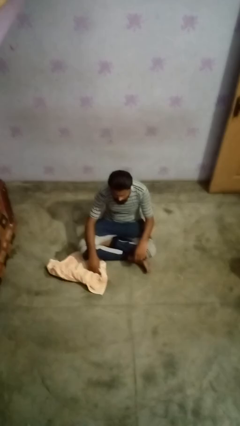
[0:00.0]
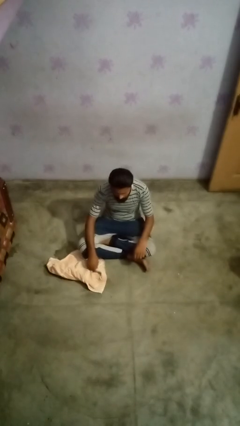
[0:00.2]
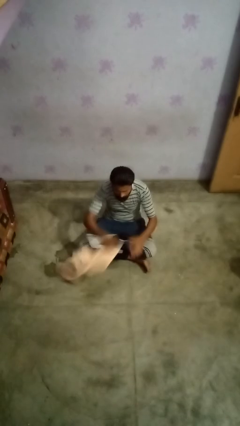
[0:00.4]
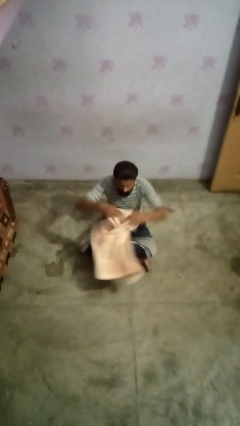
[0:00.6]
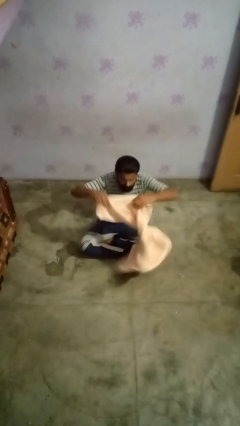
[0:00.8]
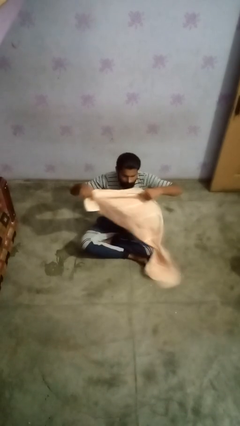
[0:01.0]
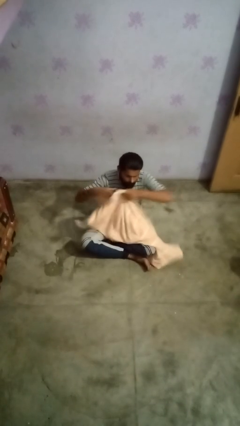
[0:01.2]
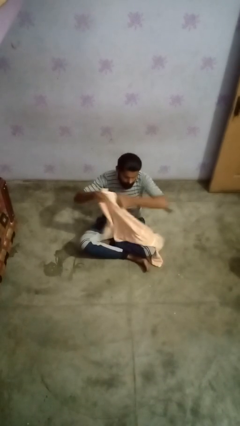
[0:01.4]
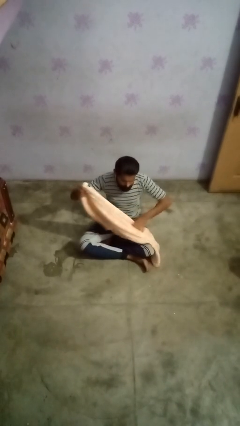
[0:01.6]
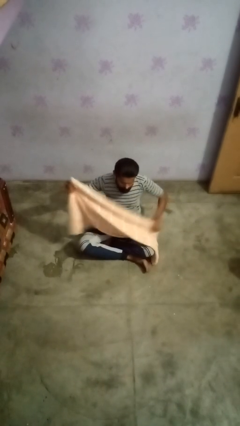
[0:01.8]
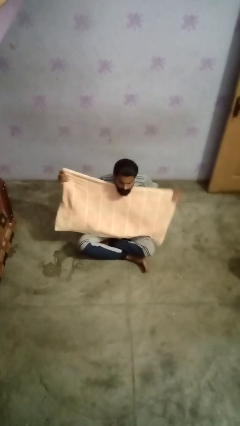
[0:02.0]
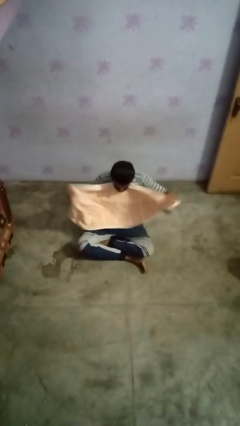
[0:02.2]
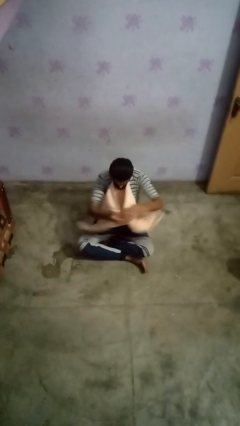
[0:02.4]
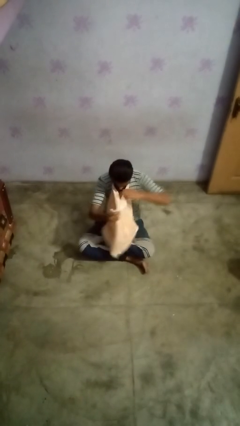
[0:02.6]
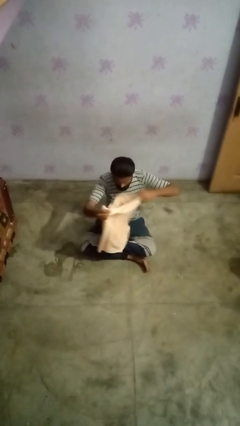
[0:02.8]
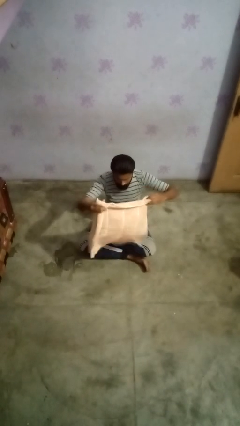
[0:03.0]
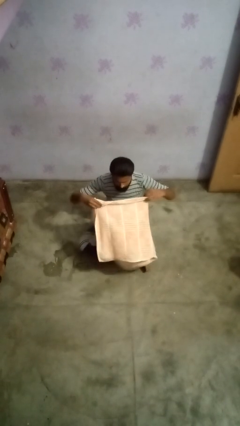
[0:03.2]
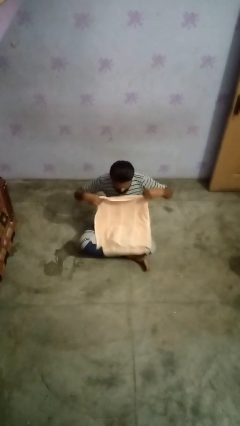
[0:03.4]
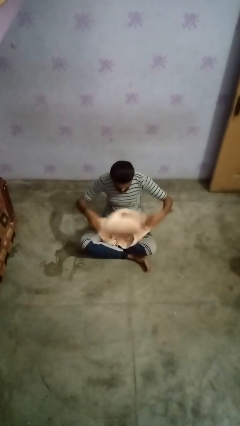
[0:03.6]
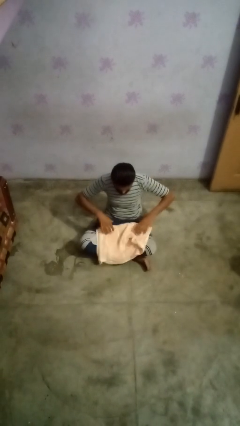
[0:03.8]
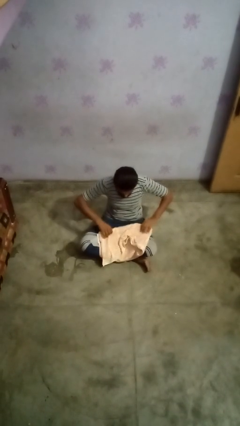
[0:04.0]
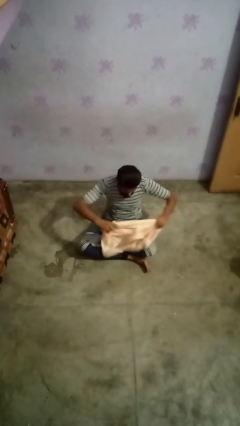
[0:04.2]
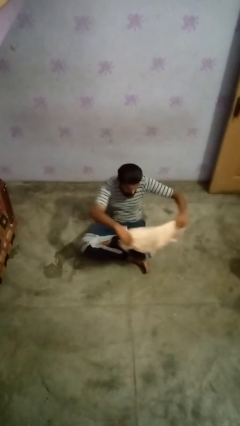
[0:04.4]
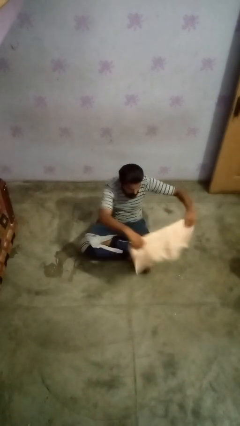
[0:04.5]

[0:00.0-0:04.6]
person folds towel

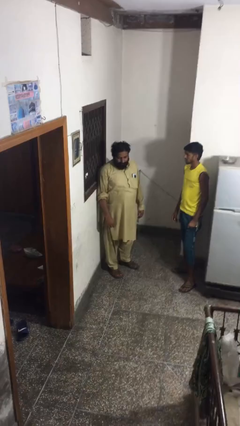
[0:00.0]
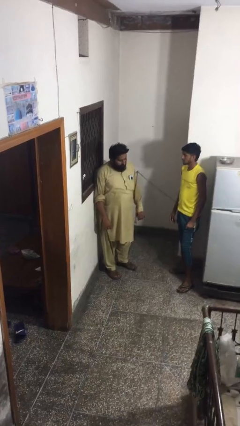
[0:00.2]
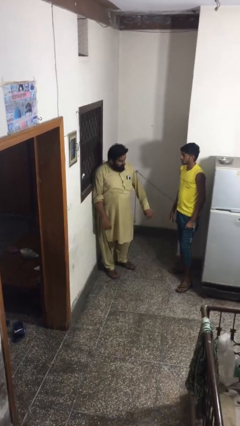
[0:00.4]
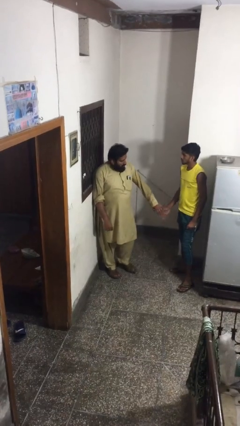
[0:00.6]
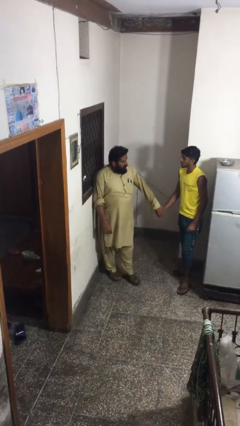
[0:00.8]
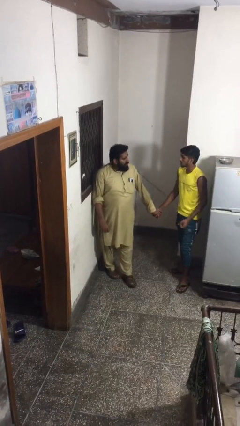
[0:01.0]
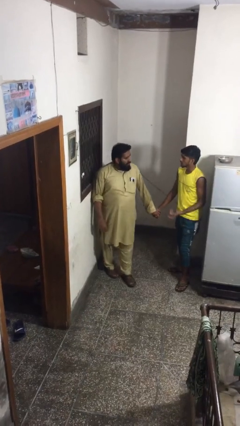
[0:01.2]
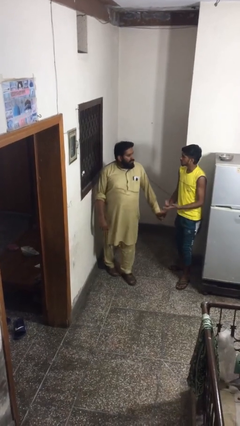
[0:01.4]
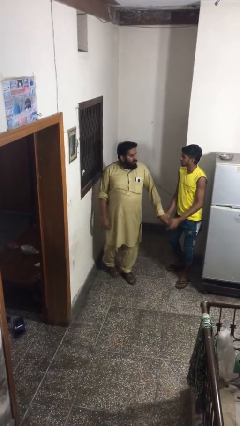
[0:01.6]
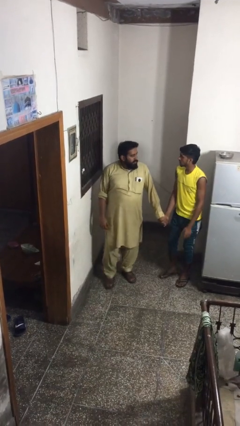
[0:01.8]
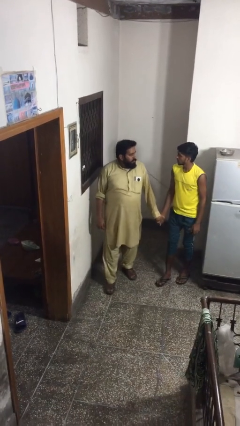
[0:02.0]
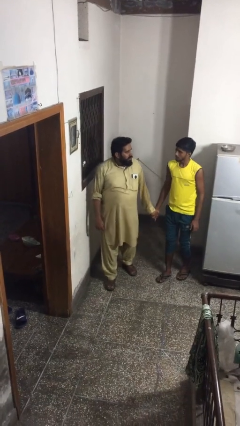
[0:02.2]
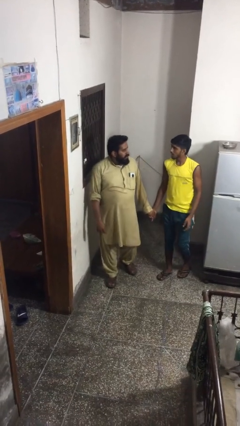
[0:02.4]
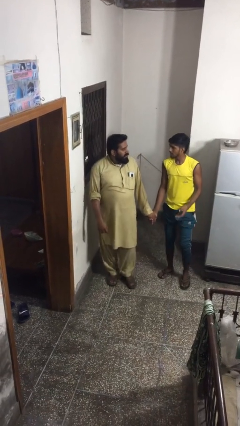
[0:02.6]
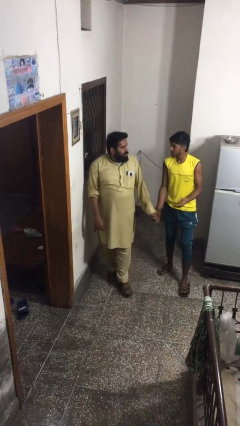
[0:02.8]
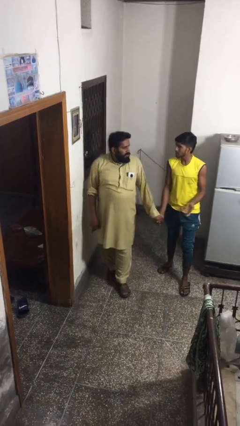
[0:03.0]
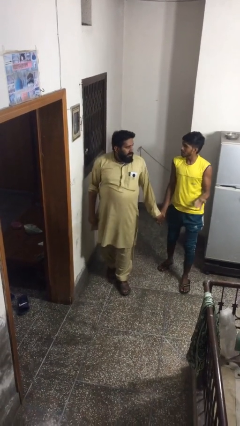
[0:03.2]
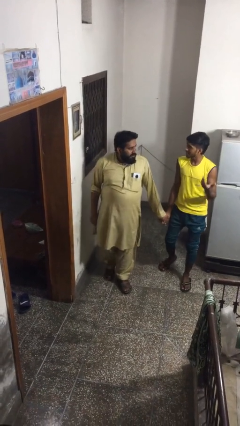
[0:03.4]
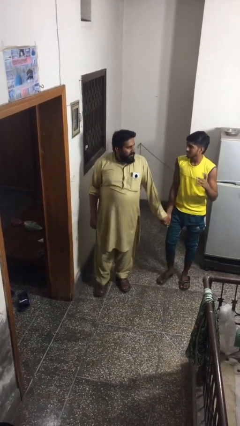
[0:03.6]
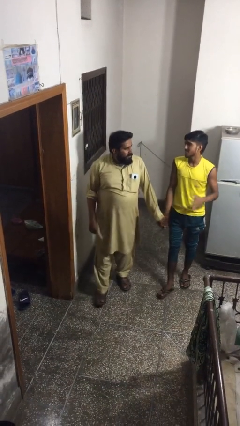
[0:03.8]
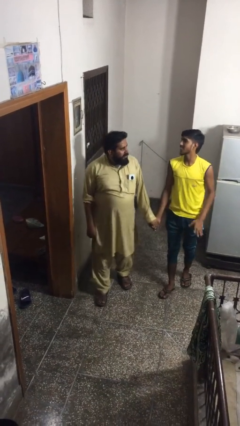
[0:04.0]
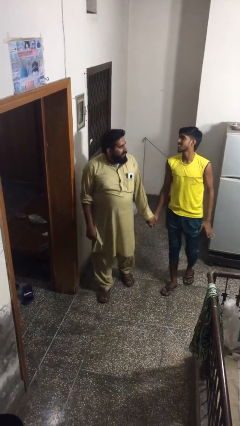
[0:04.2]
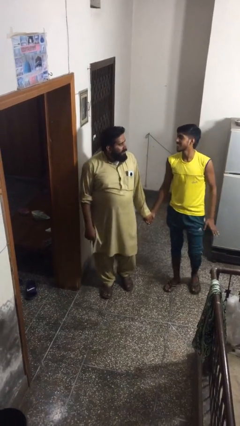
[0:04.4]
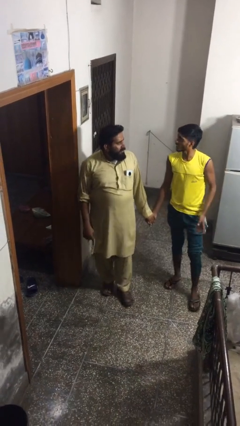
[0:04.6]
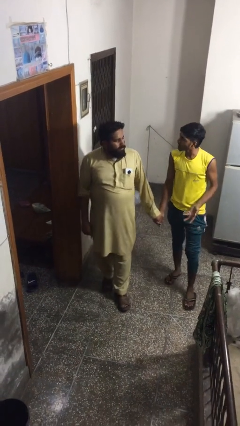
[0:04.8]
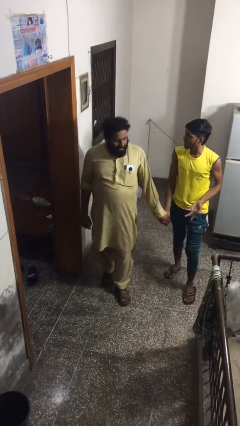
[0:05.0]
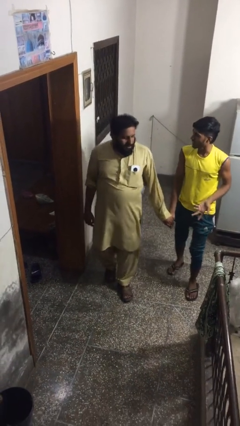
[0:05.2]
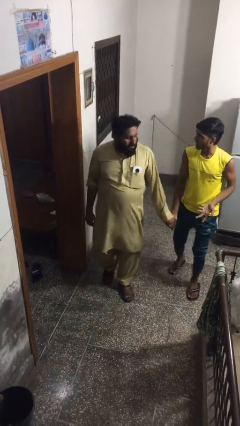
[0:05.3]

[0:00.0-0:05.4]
person holds hand

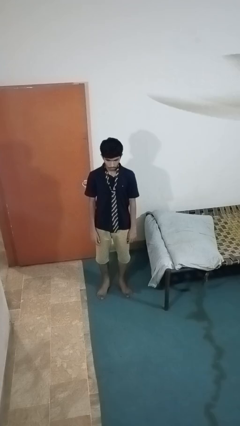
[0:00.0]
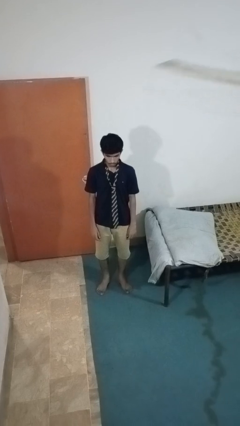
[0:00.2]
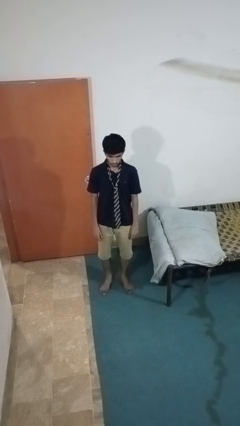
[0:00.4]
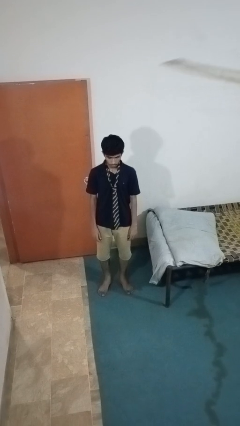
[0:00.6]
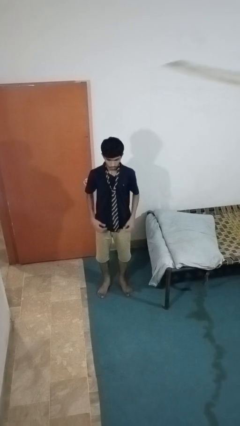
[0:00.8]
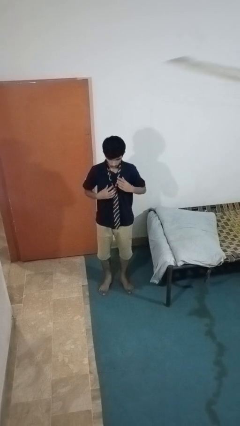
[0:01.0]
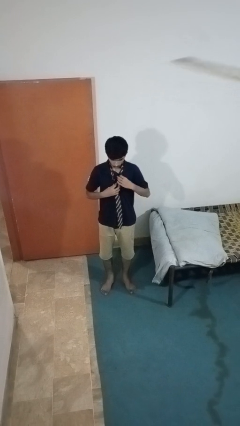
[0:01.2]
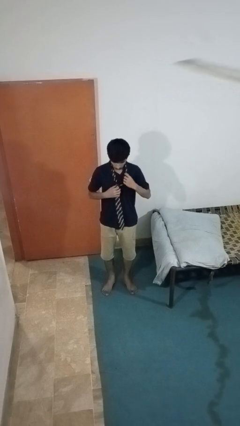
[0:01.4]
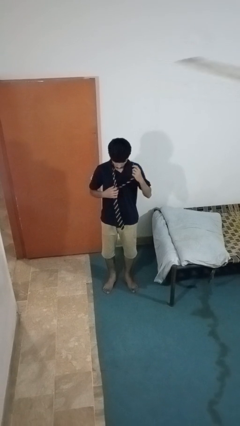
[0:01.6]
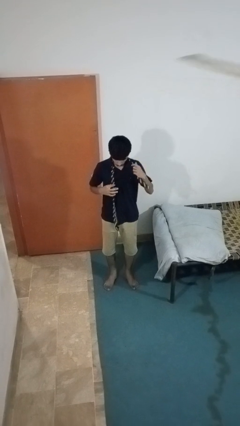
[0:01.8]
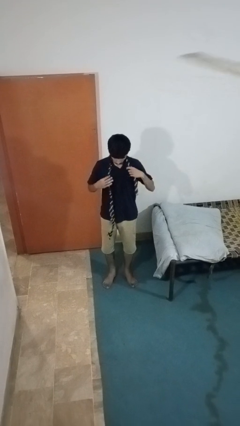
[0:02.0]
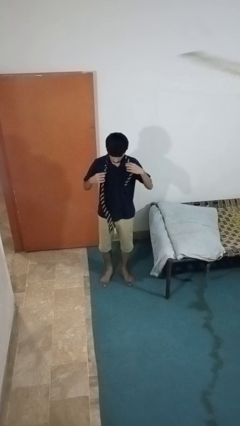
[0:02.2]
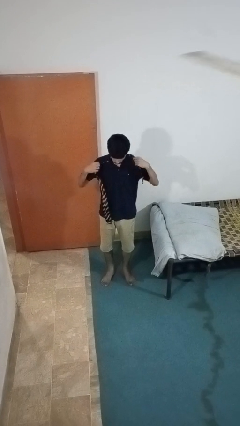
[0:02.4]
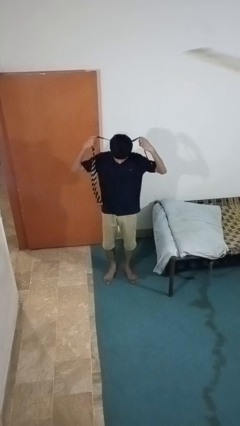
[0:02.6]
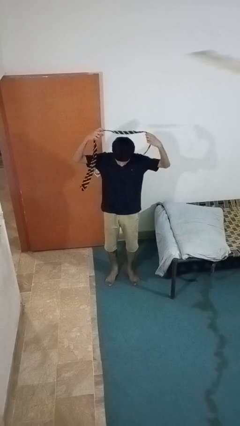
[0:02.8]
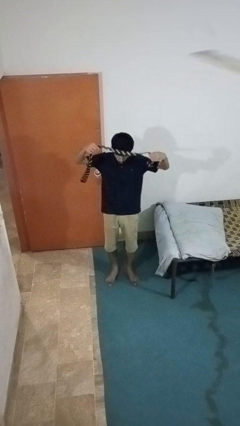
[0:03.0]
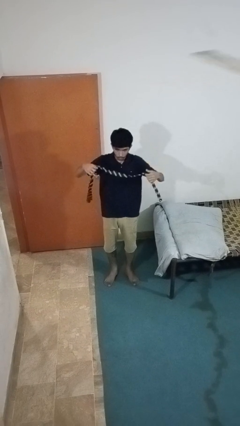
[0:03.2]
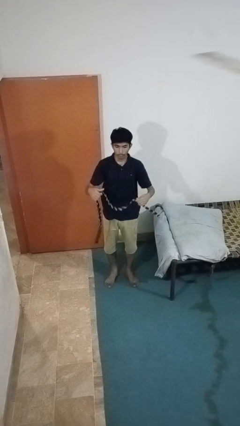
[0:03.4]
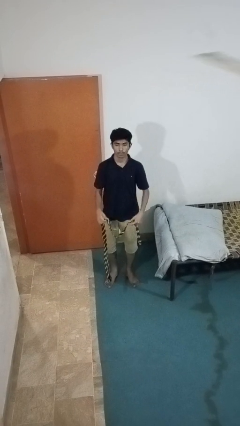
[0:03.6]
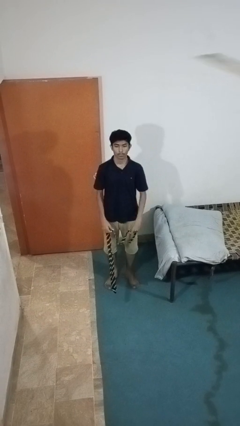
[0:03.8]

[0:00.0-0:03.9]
person takes off necktie

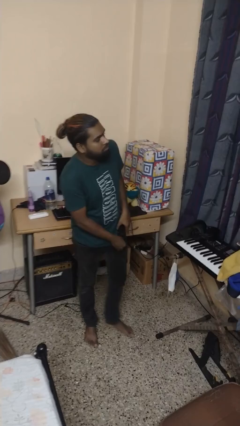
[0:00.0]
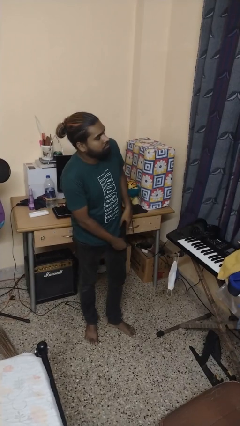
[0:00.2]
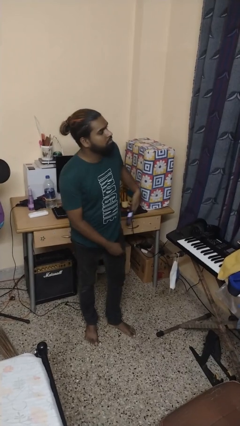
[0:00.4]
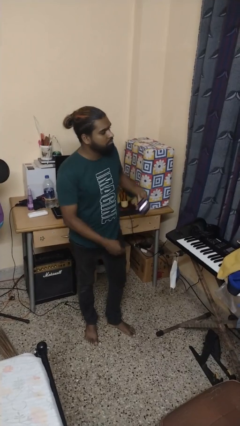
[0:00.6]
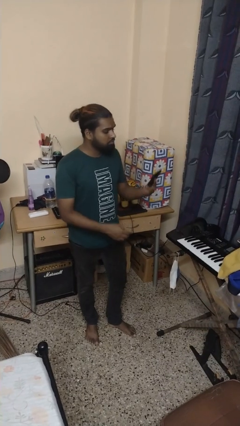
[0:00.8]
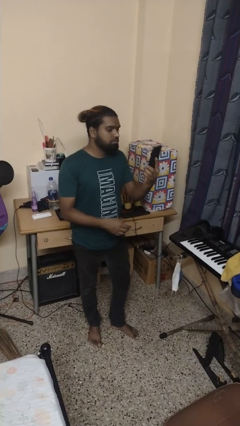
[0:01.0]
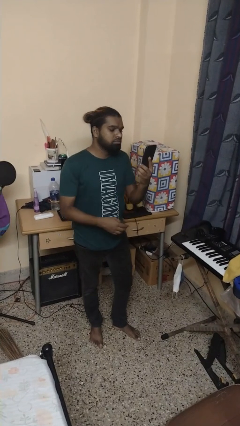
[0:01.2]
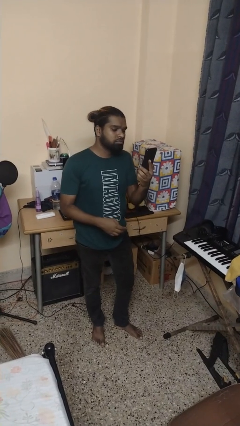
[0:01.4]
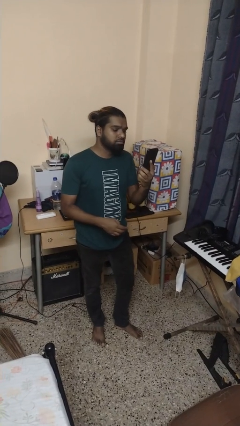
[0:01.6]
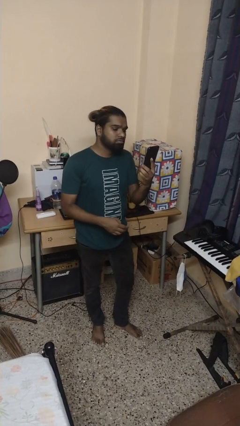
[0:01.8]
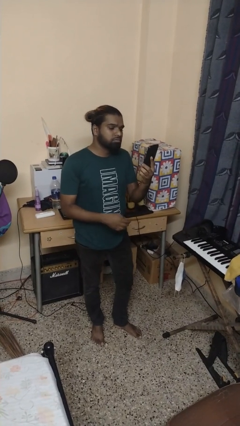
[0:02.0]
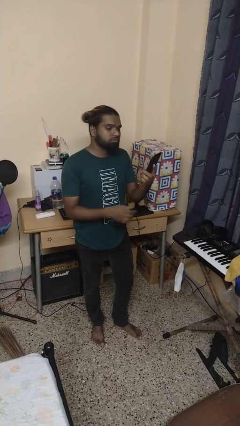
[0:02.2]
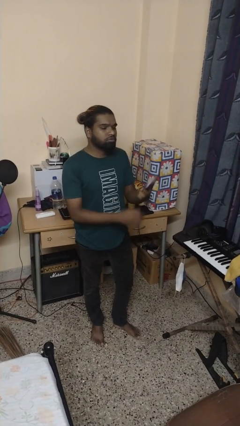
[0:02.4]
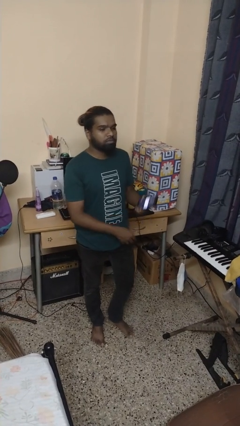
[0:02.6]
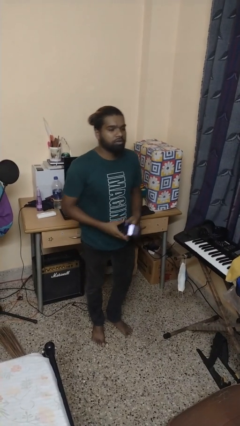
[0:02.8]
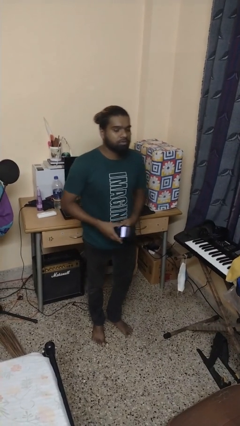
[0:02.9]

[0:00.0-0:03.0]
person takes phone from pocket

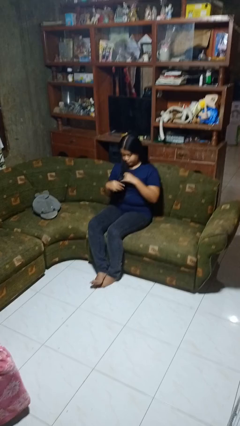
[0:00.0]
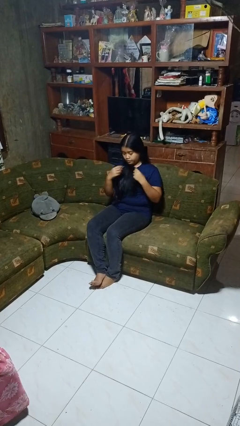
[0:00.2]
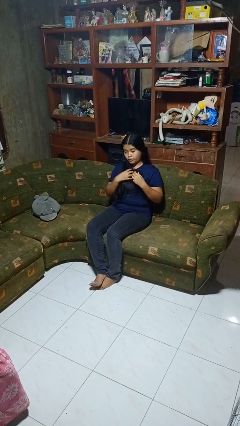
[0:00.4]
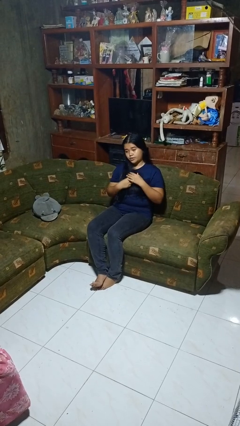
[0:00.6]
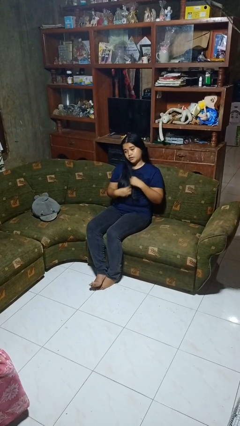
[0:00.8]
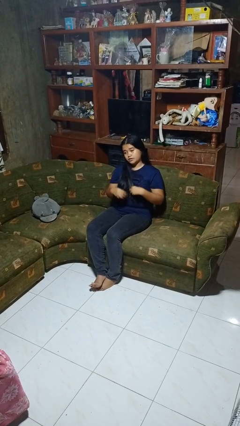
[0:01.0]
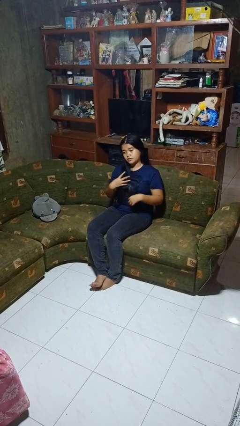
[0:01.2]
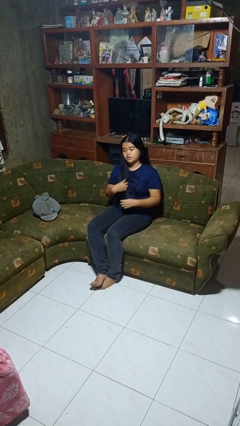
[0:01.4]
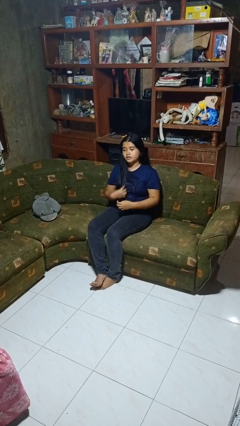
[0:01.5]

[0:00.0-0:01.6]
person strokes hair
